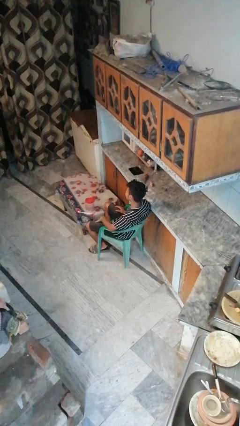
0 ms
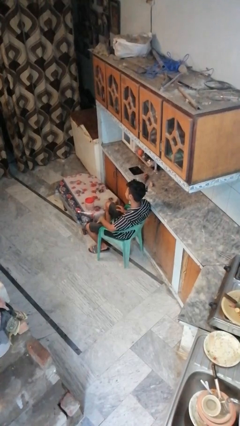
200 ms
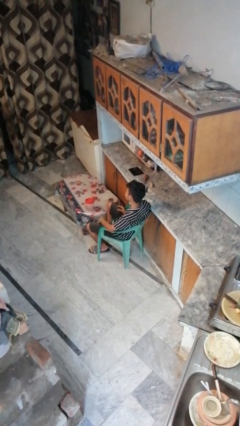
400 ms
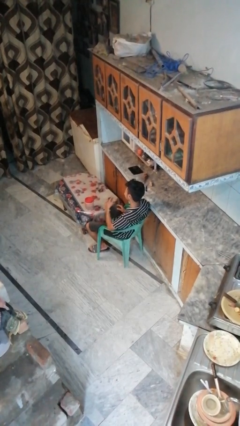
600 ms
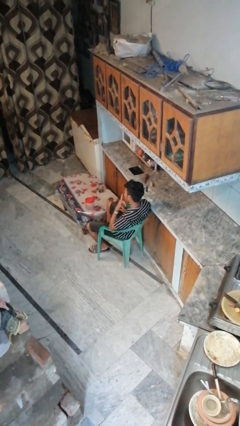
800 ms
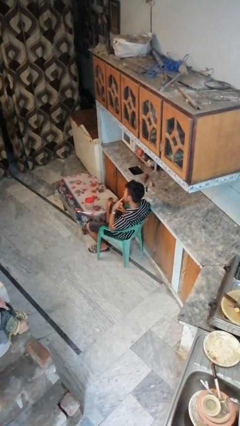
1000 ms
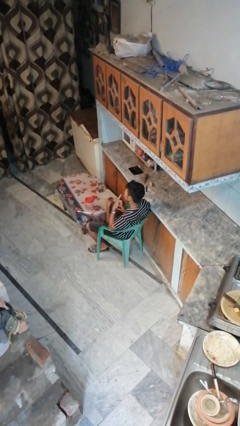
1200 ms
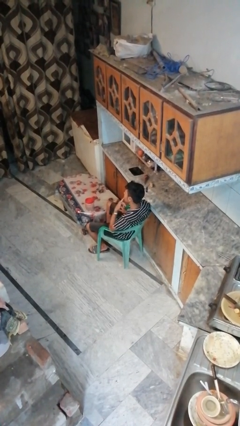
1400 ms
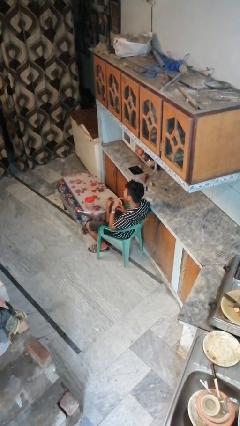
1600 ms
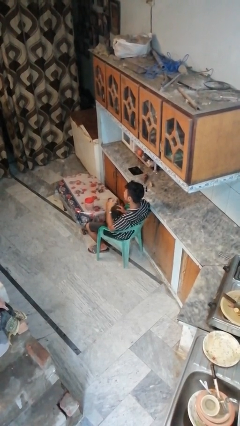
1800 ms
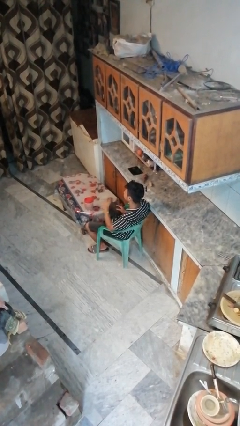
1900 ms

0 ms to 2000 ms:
person licks fingers

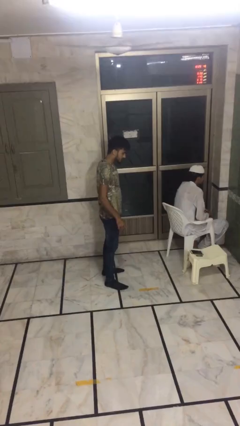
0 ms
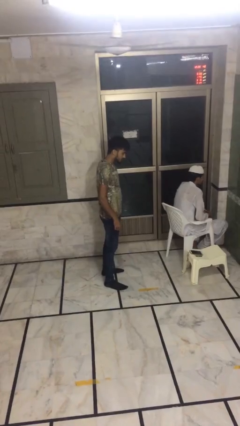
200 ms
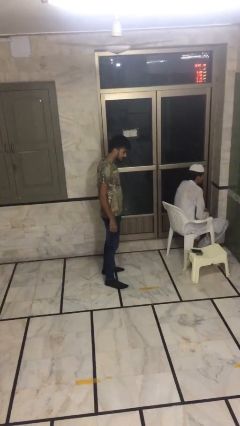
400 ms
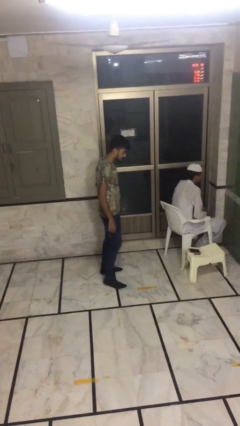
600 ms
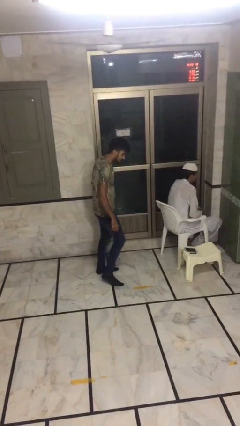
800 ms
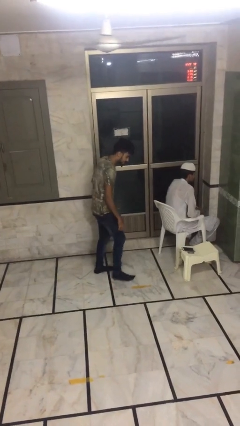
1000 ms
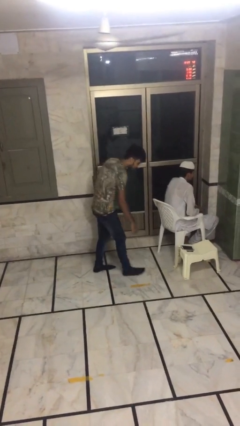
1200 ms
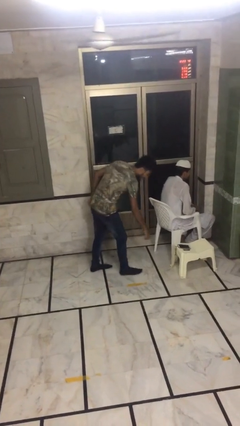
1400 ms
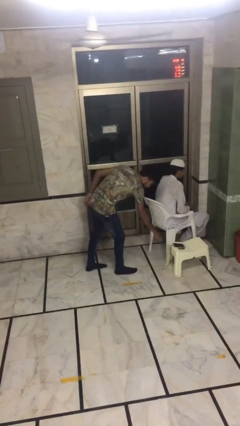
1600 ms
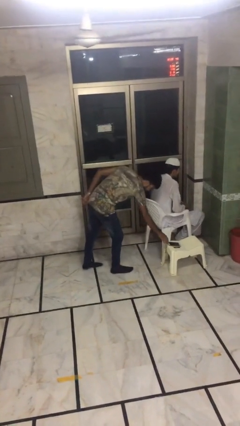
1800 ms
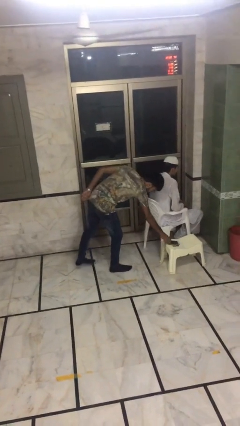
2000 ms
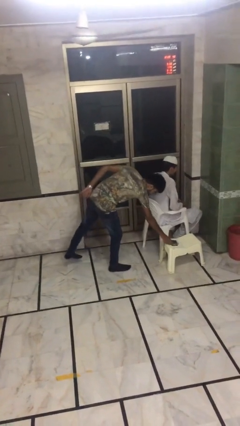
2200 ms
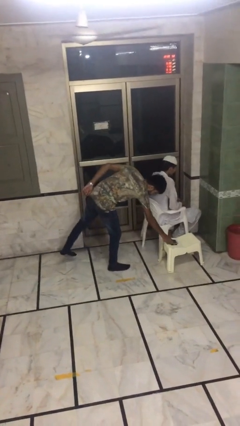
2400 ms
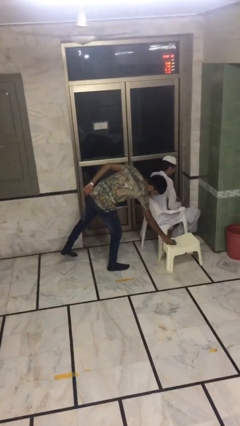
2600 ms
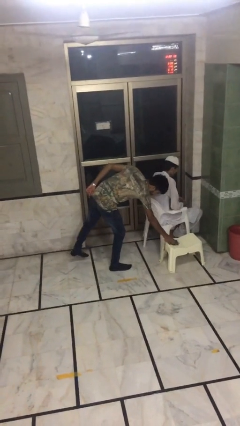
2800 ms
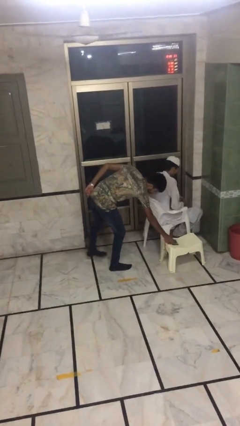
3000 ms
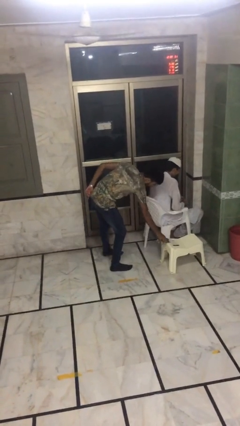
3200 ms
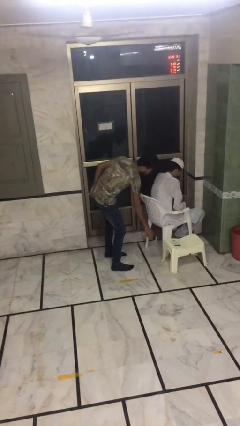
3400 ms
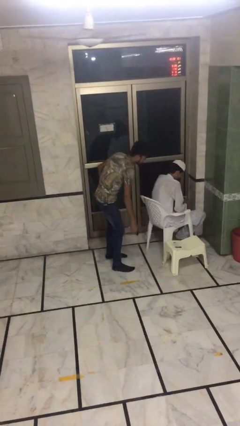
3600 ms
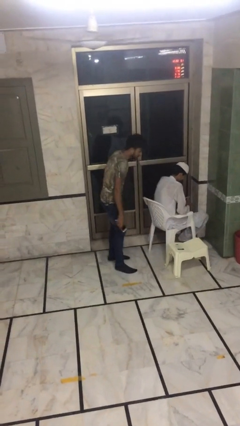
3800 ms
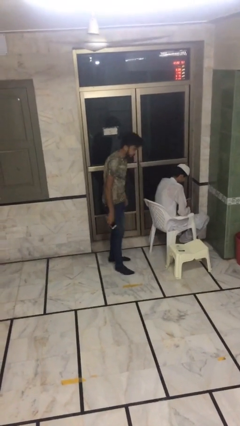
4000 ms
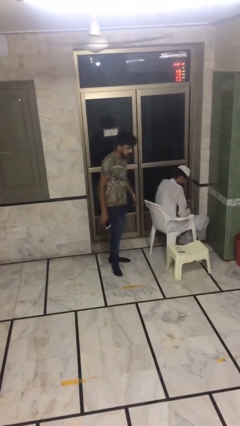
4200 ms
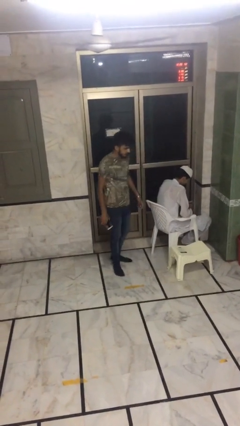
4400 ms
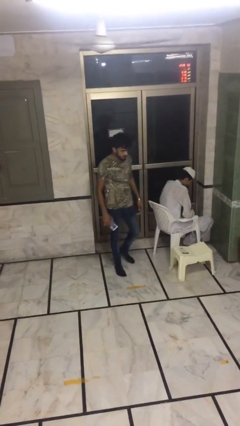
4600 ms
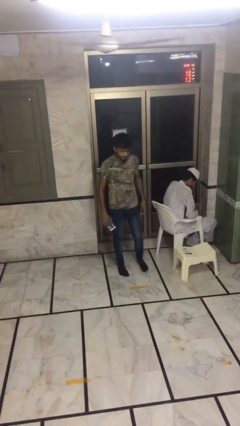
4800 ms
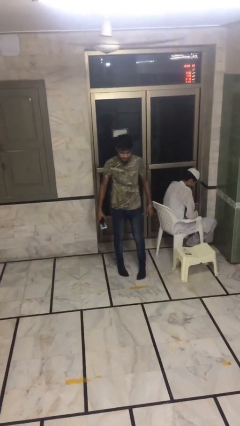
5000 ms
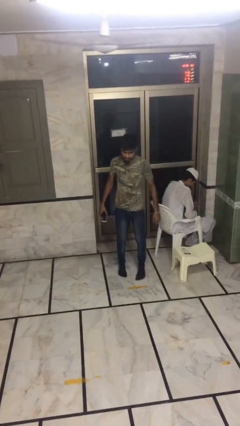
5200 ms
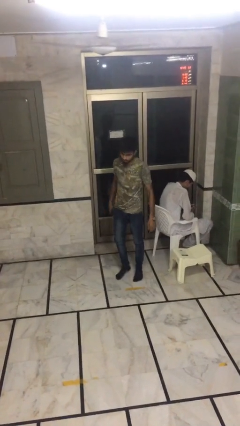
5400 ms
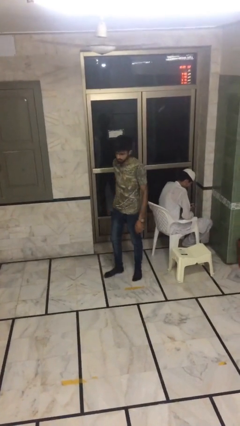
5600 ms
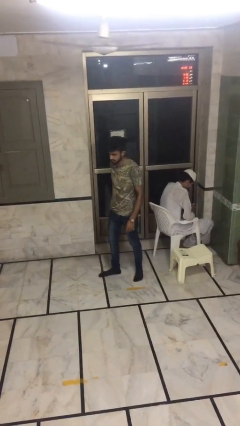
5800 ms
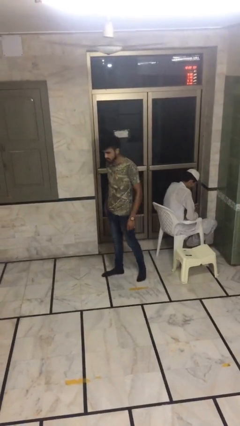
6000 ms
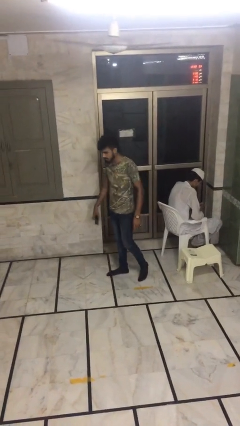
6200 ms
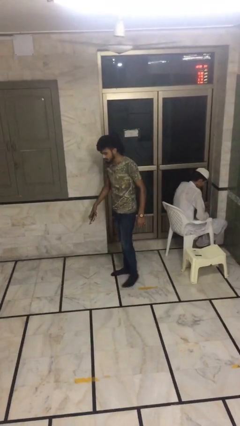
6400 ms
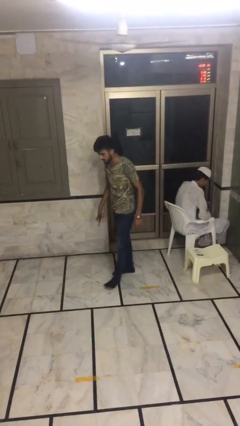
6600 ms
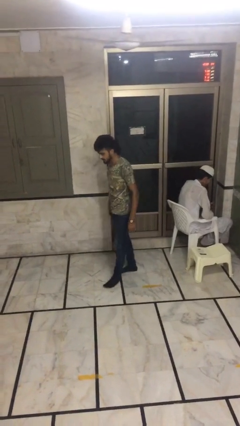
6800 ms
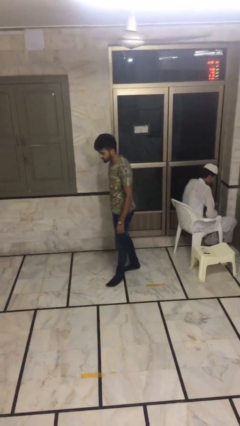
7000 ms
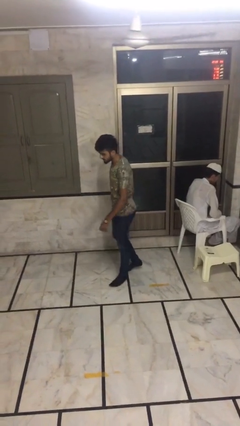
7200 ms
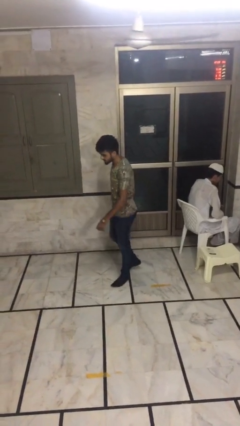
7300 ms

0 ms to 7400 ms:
person steals object from person

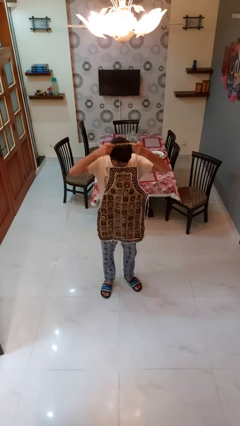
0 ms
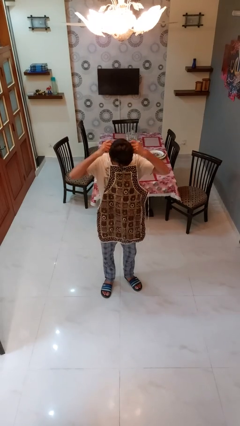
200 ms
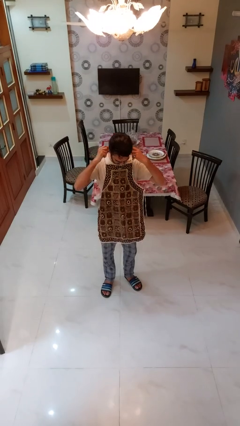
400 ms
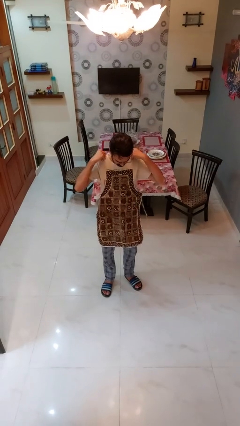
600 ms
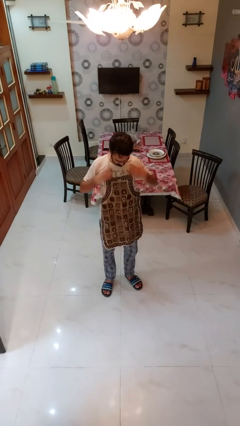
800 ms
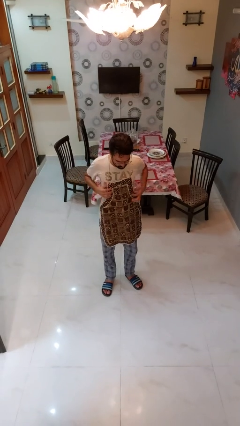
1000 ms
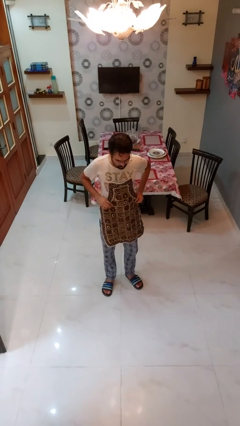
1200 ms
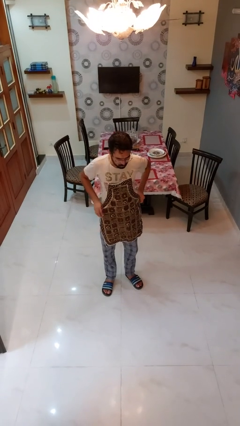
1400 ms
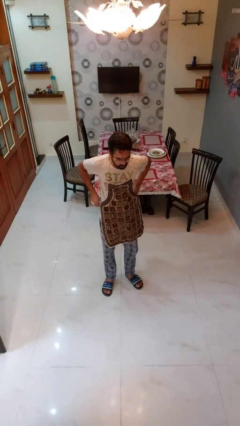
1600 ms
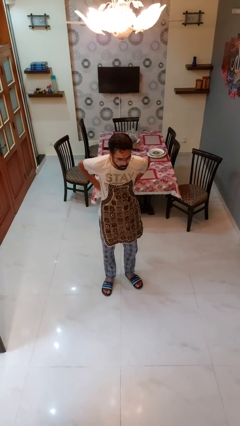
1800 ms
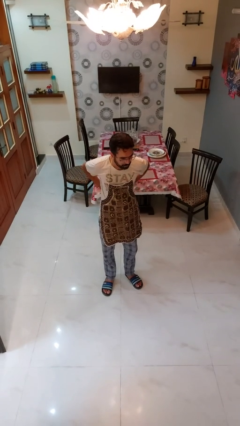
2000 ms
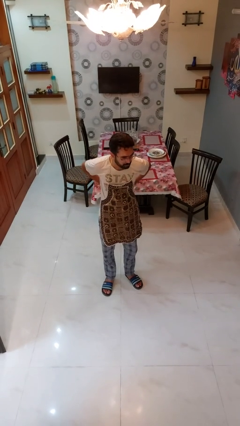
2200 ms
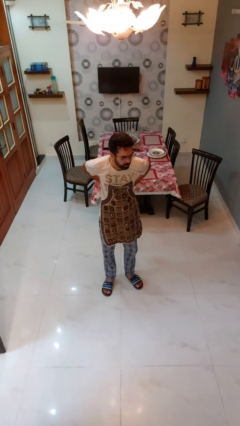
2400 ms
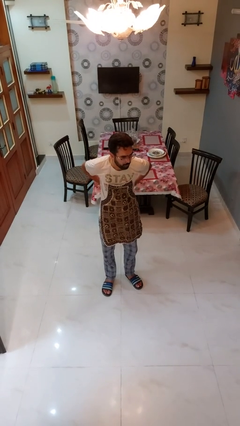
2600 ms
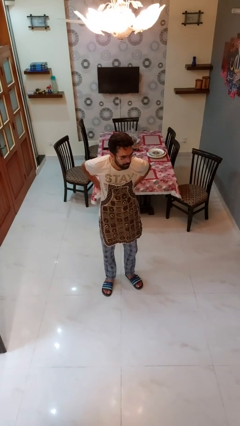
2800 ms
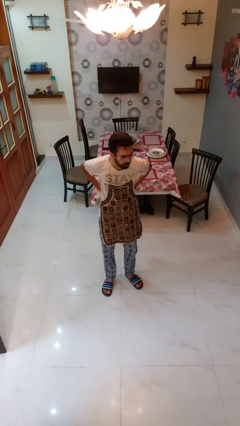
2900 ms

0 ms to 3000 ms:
person puts on apron

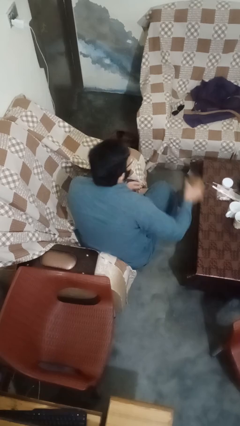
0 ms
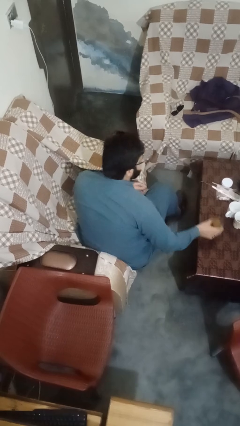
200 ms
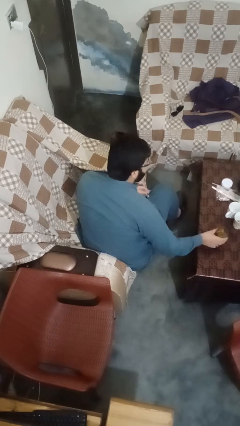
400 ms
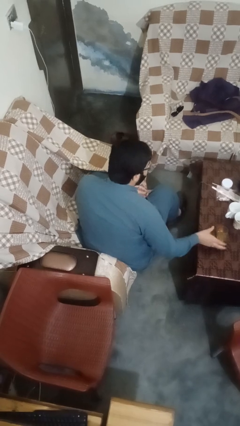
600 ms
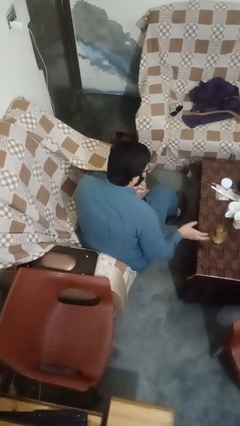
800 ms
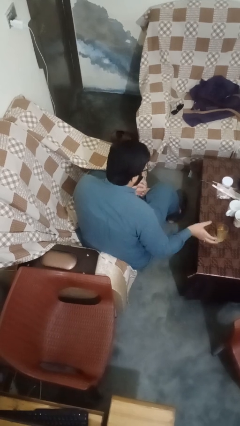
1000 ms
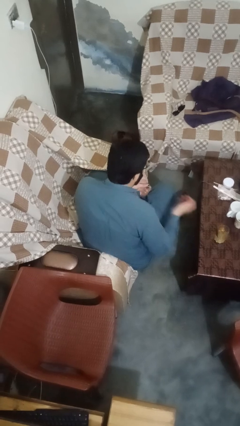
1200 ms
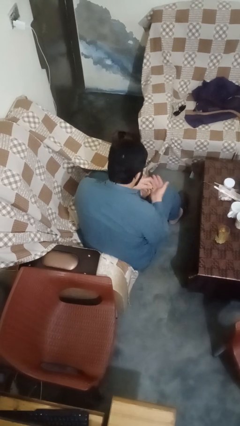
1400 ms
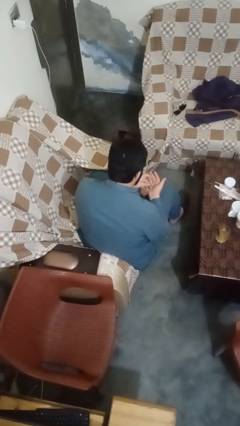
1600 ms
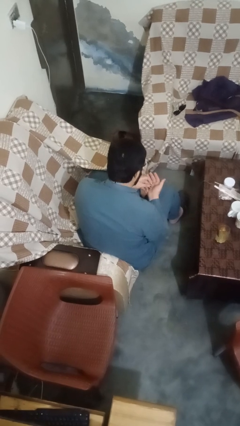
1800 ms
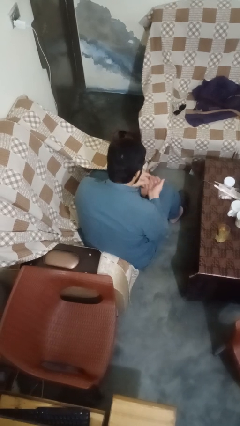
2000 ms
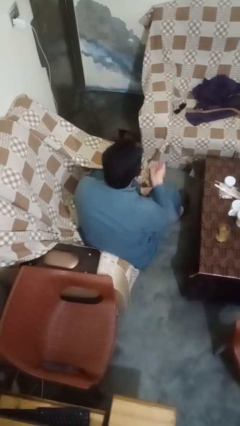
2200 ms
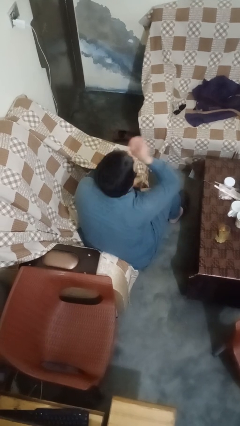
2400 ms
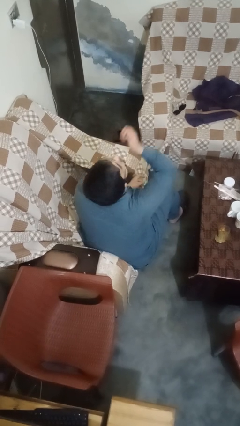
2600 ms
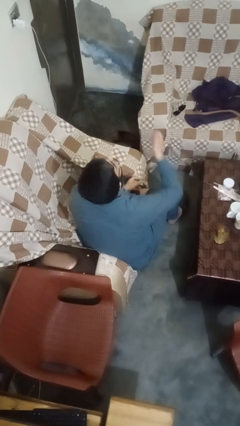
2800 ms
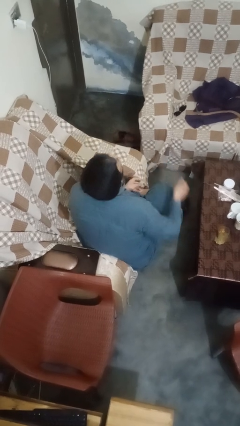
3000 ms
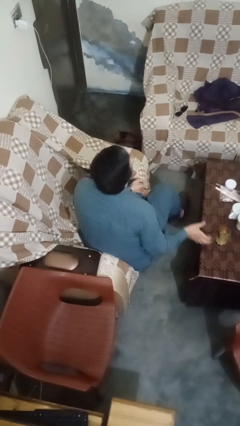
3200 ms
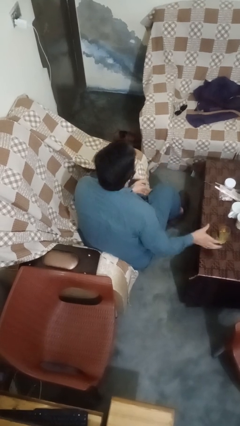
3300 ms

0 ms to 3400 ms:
person takes medicine pills

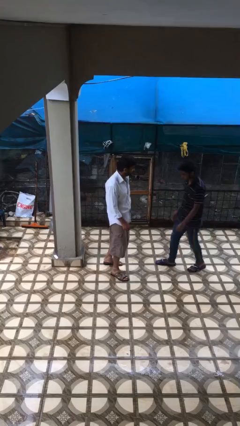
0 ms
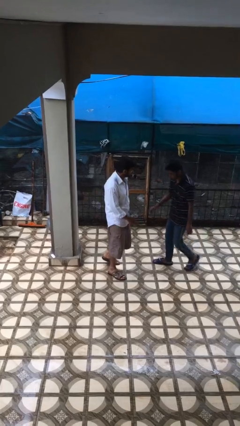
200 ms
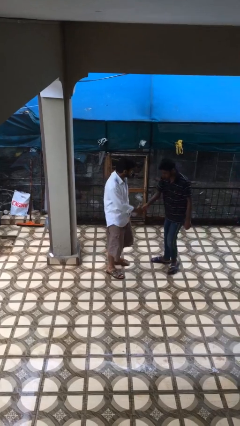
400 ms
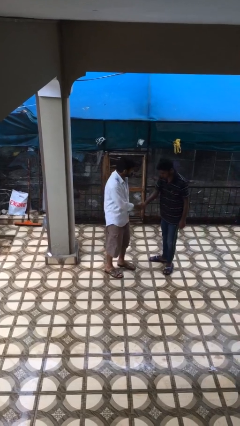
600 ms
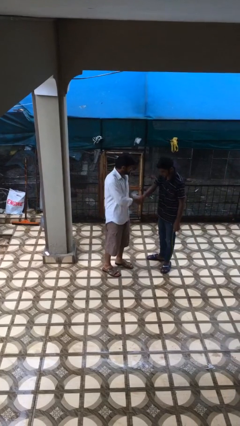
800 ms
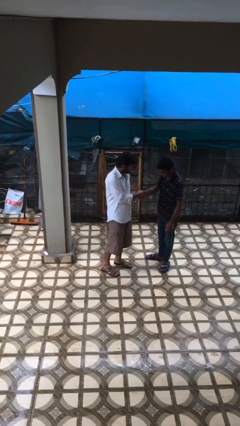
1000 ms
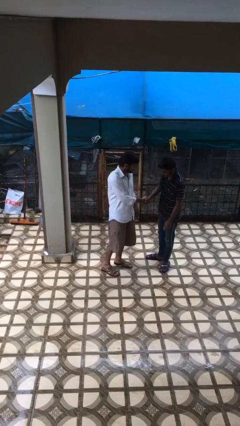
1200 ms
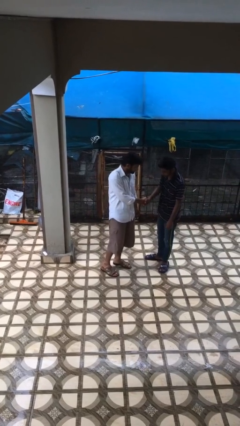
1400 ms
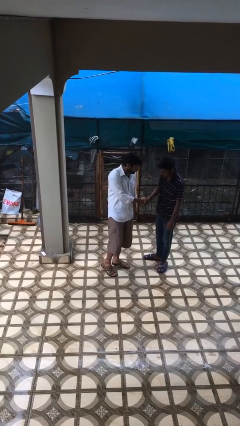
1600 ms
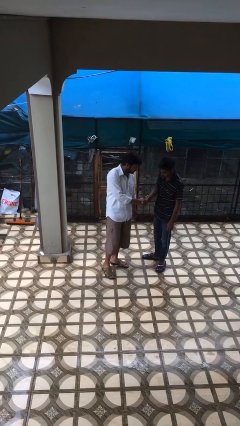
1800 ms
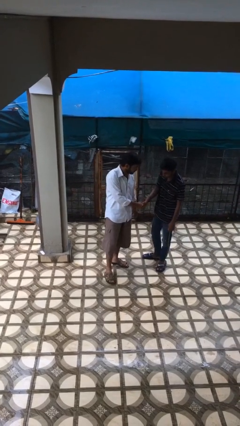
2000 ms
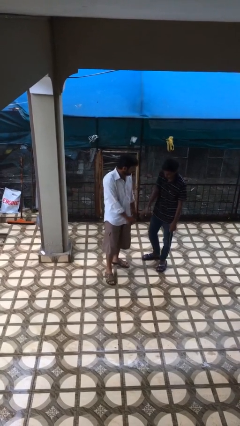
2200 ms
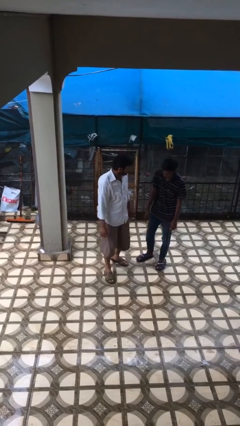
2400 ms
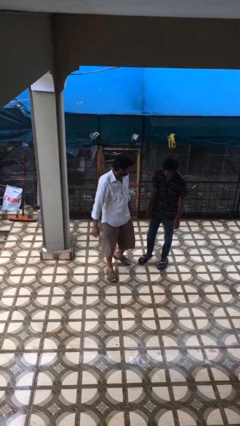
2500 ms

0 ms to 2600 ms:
person shakes hand
